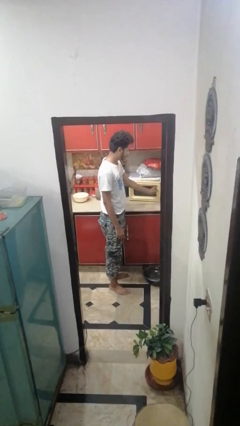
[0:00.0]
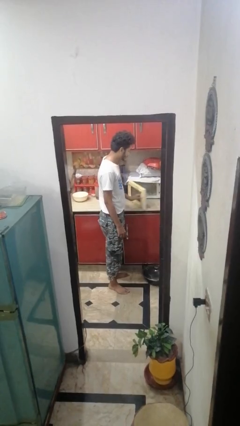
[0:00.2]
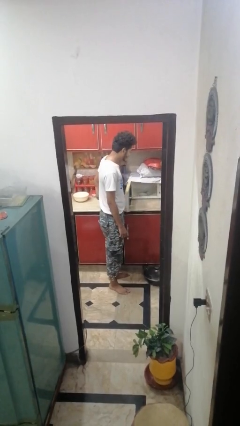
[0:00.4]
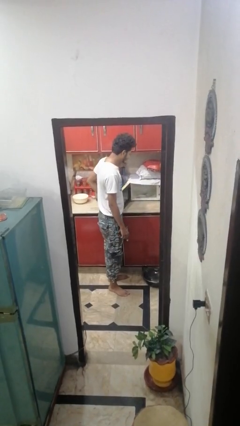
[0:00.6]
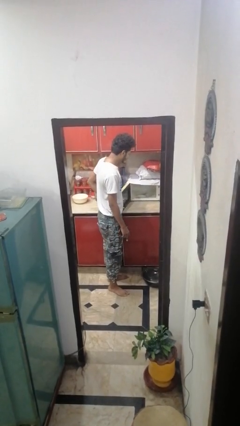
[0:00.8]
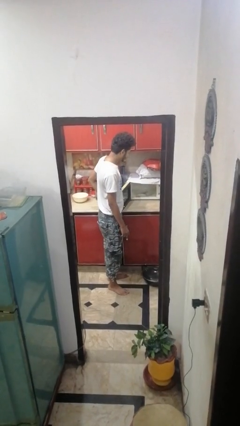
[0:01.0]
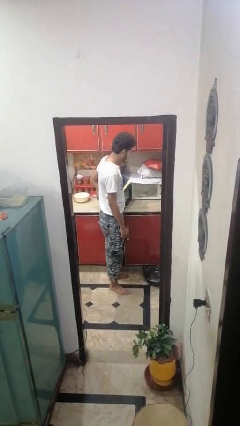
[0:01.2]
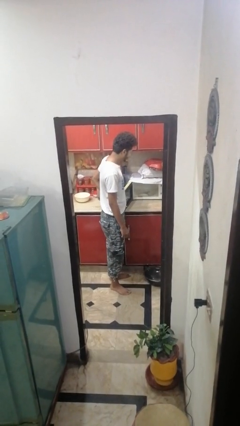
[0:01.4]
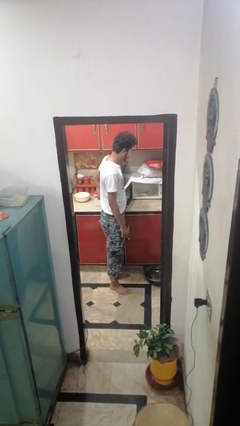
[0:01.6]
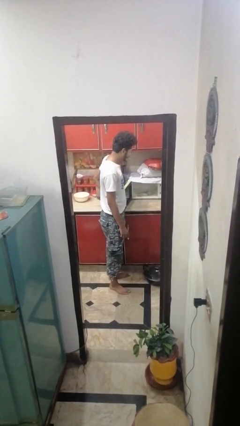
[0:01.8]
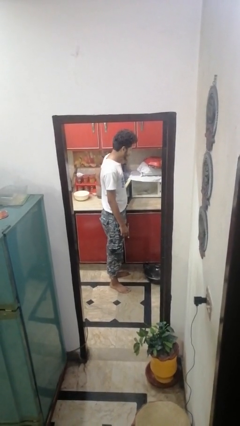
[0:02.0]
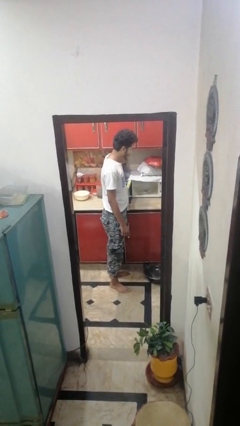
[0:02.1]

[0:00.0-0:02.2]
person opens microwave

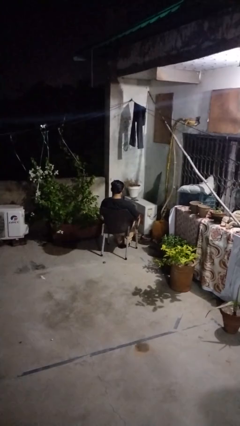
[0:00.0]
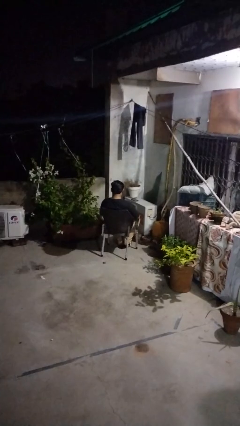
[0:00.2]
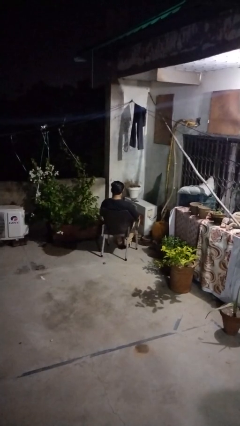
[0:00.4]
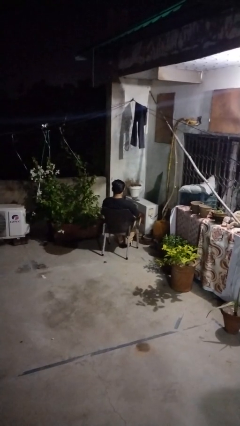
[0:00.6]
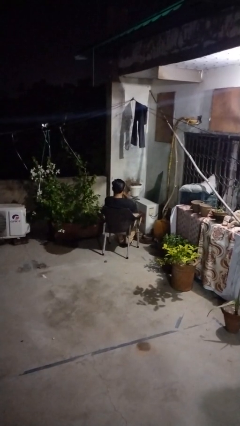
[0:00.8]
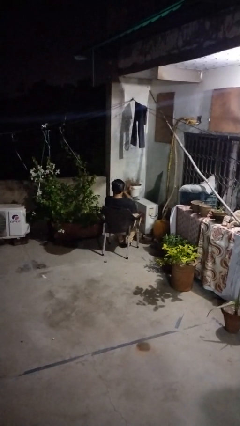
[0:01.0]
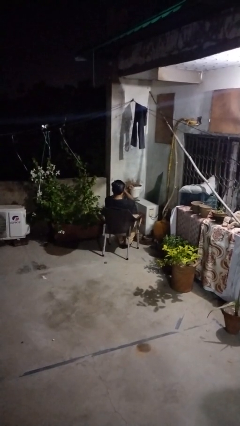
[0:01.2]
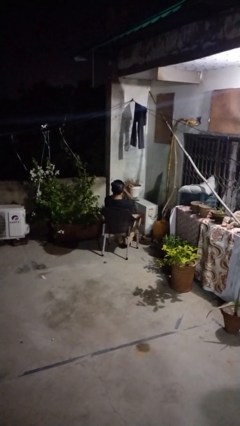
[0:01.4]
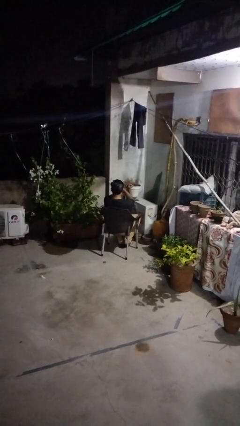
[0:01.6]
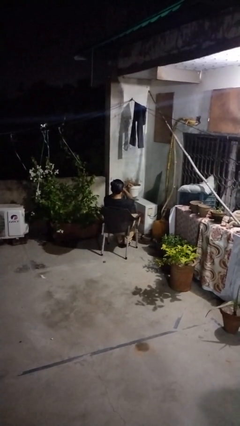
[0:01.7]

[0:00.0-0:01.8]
person gestures arms x

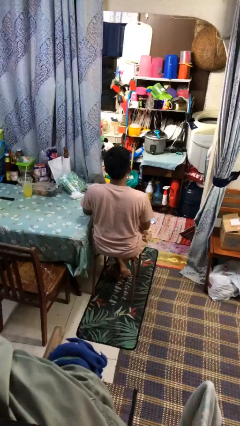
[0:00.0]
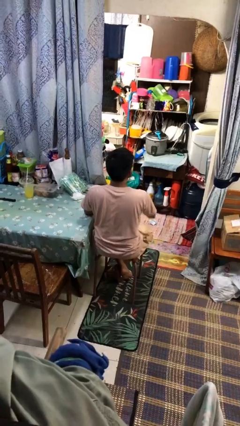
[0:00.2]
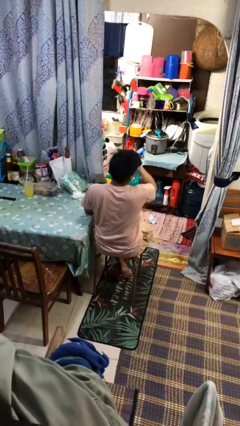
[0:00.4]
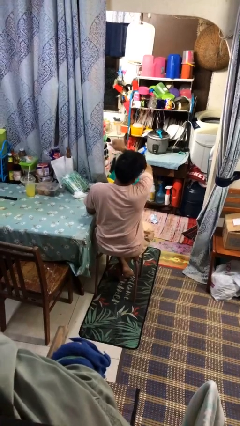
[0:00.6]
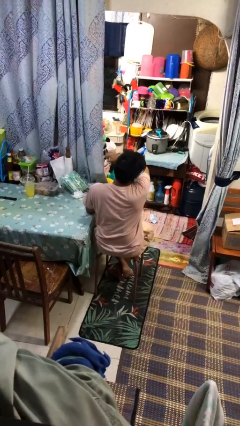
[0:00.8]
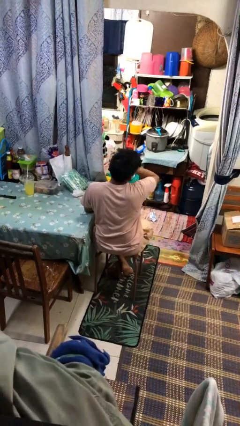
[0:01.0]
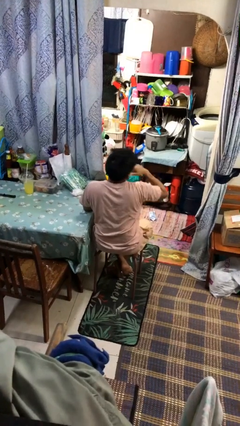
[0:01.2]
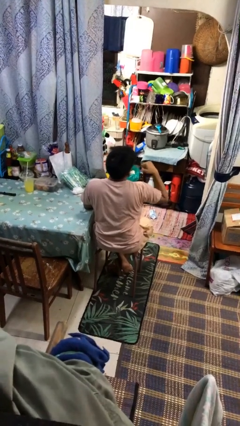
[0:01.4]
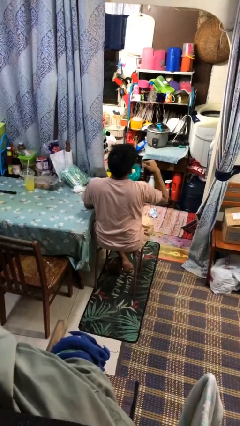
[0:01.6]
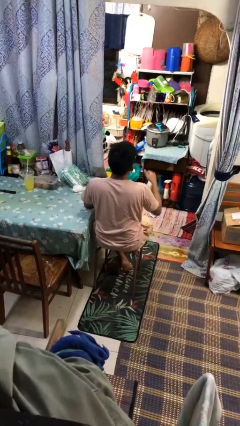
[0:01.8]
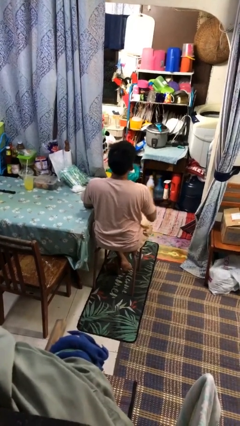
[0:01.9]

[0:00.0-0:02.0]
person gestures cut

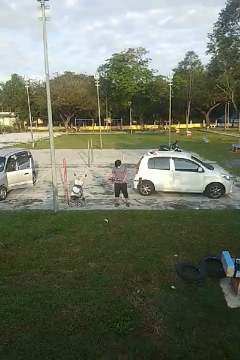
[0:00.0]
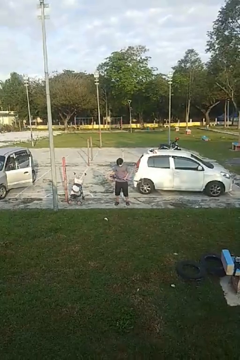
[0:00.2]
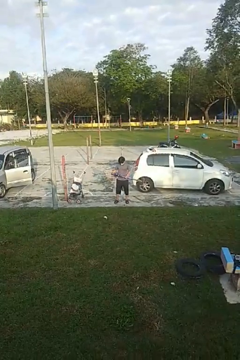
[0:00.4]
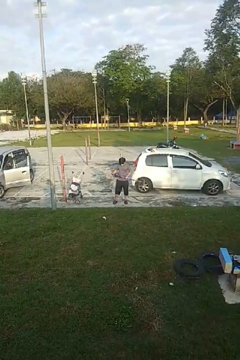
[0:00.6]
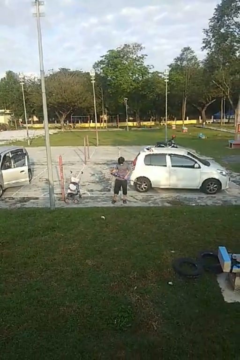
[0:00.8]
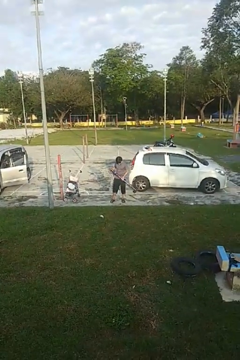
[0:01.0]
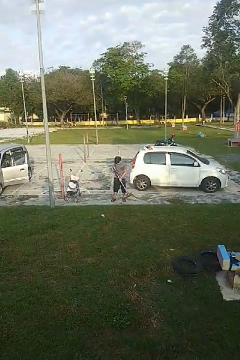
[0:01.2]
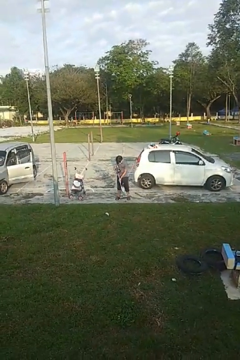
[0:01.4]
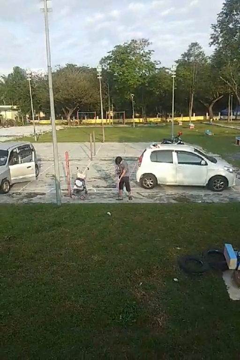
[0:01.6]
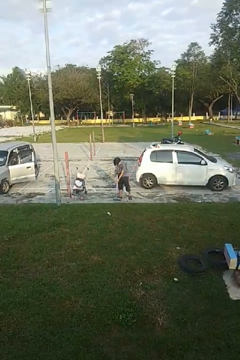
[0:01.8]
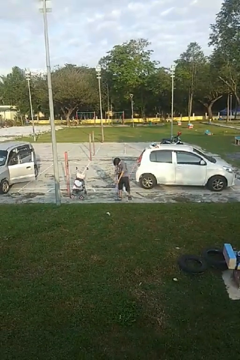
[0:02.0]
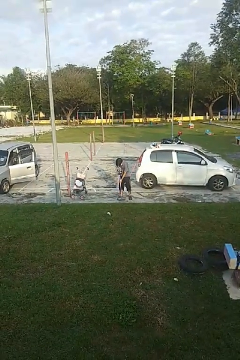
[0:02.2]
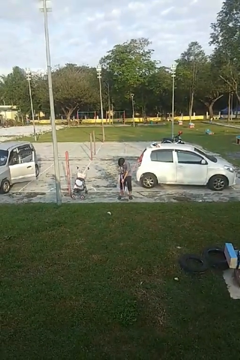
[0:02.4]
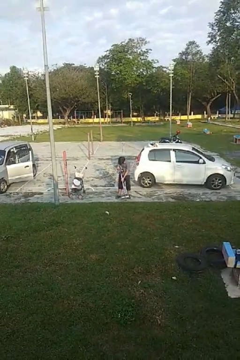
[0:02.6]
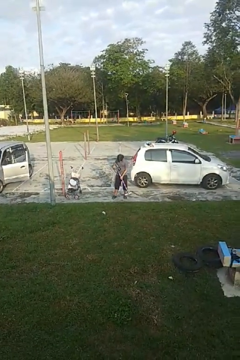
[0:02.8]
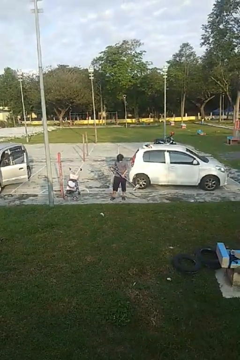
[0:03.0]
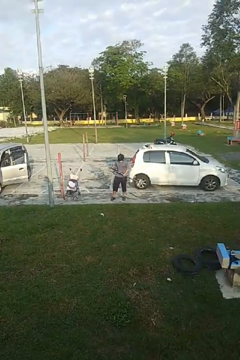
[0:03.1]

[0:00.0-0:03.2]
person vacuums carpet

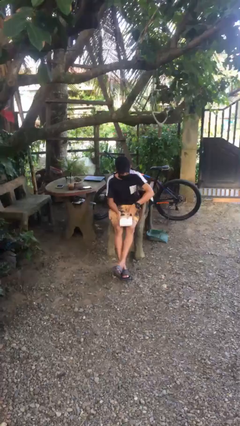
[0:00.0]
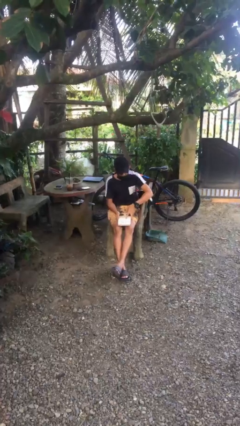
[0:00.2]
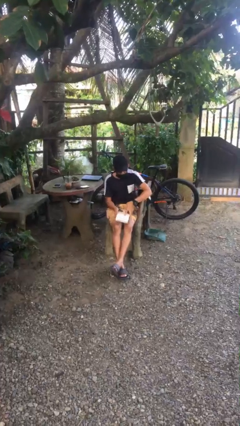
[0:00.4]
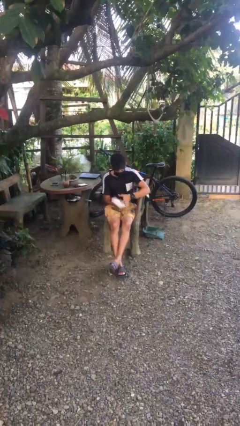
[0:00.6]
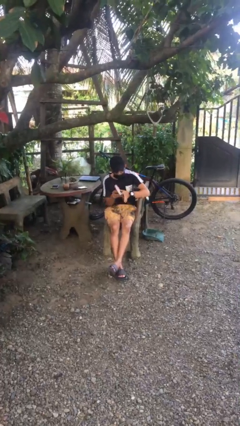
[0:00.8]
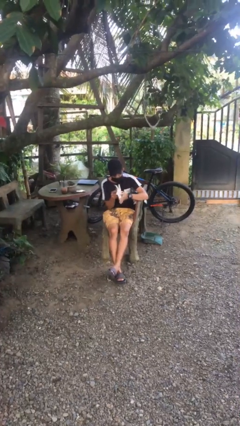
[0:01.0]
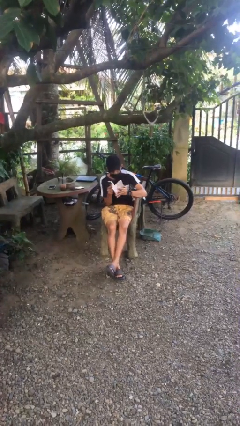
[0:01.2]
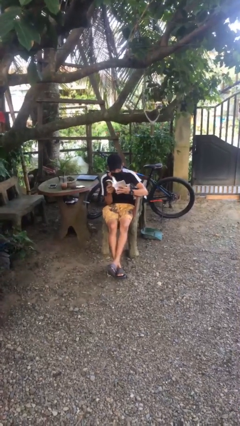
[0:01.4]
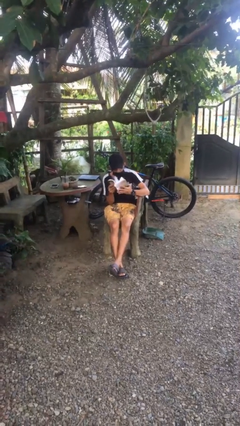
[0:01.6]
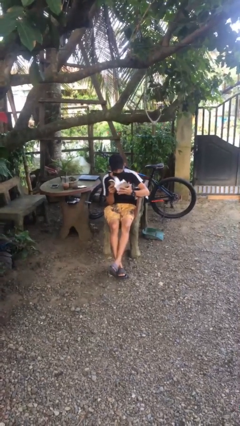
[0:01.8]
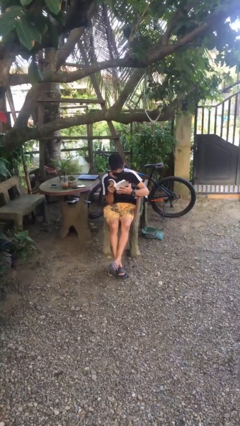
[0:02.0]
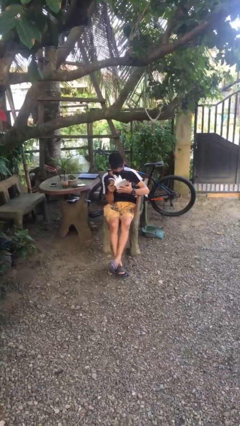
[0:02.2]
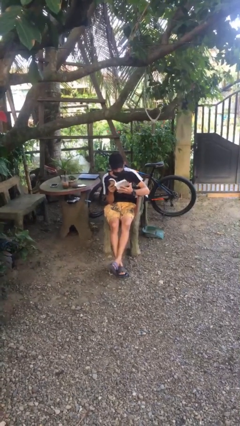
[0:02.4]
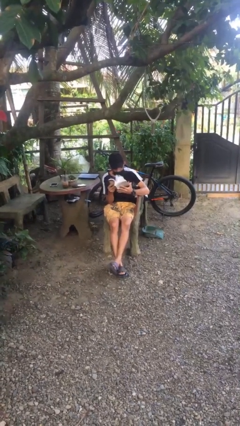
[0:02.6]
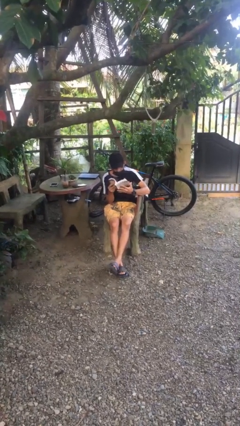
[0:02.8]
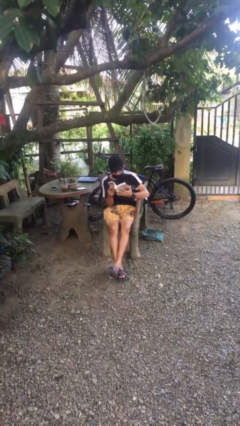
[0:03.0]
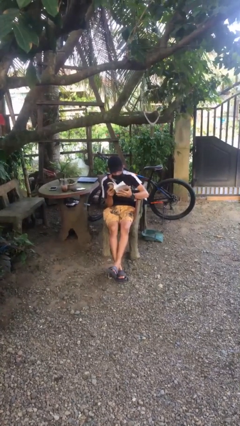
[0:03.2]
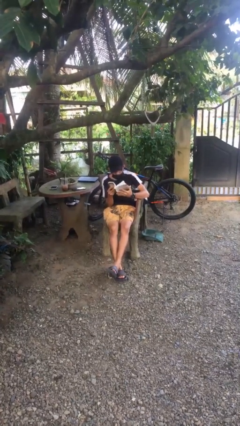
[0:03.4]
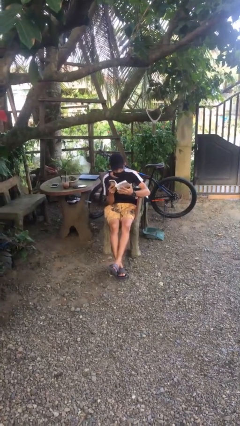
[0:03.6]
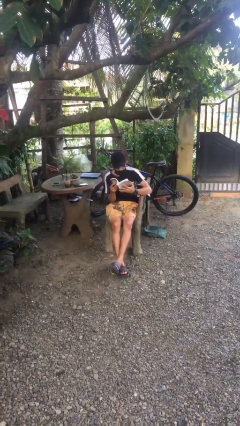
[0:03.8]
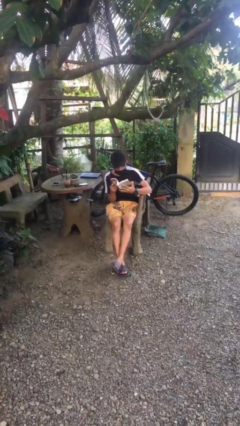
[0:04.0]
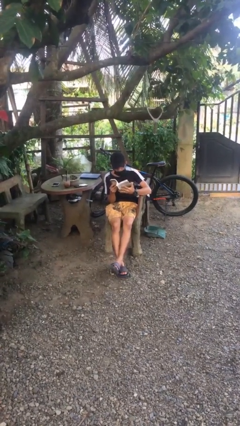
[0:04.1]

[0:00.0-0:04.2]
person reads document

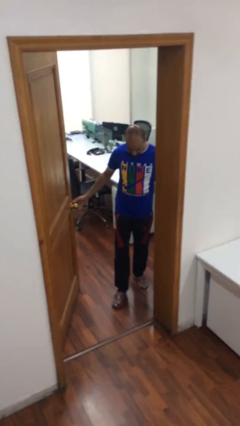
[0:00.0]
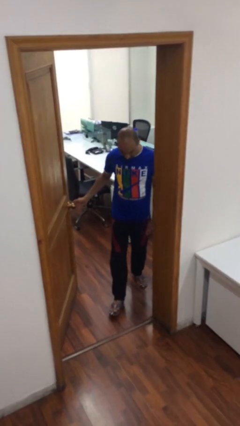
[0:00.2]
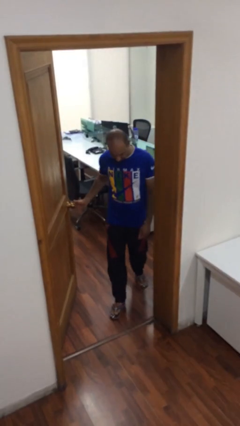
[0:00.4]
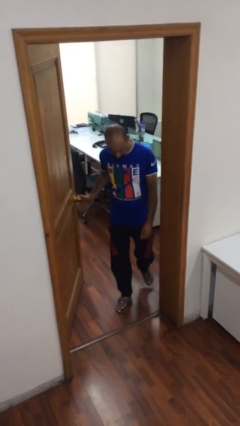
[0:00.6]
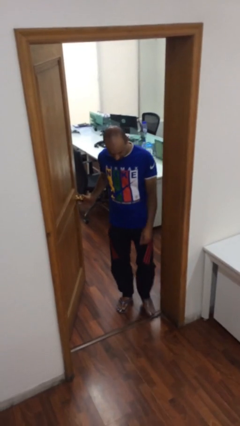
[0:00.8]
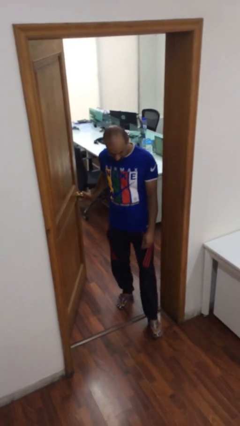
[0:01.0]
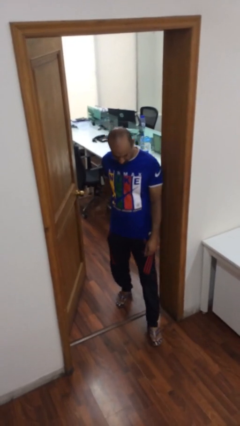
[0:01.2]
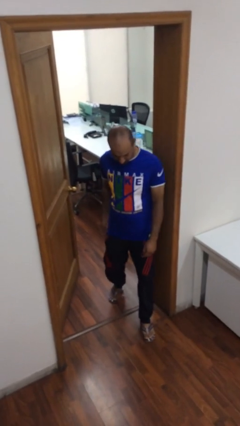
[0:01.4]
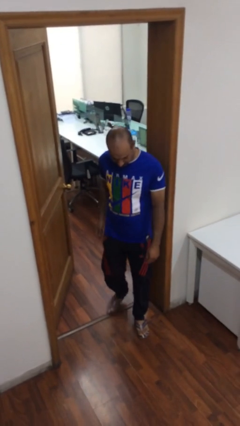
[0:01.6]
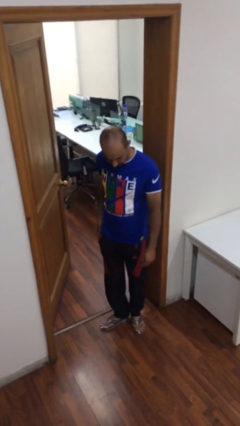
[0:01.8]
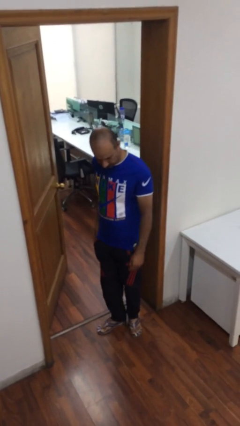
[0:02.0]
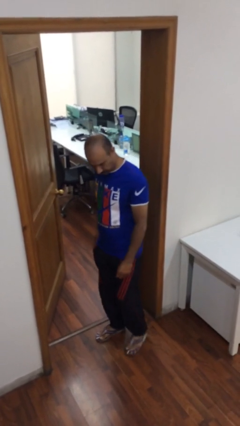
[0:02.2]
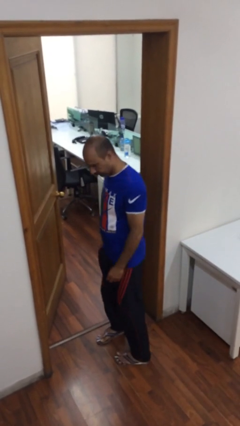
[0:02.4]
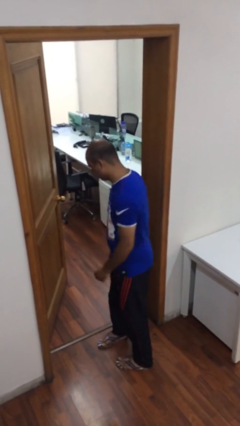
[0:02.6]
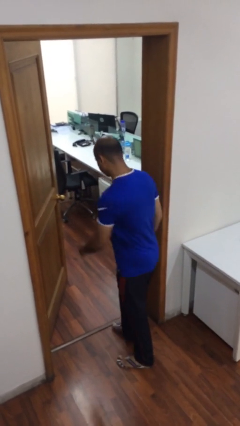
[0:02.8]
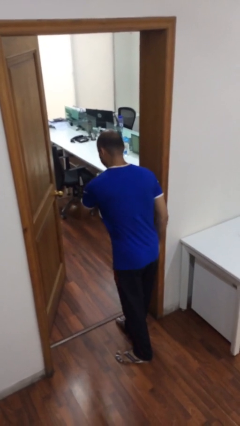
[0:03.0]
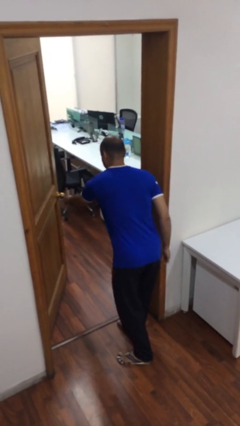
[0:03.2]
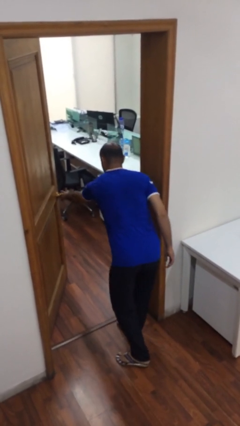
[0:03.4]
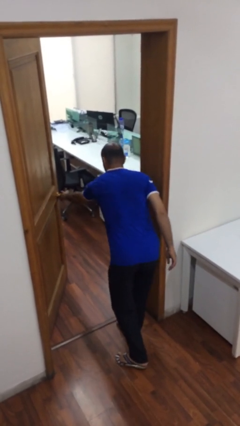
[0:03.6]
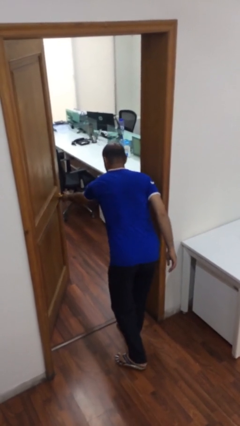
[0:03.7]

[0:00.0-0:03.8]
person enters scene through structure

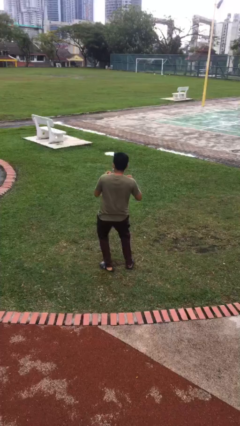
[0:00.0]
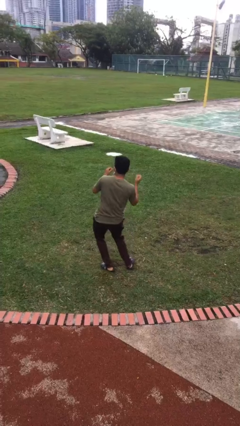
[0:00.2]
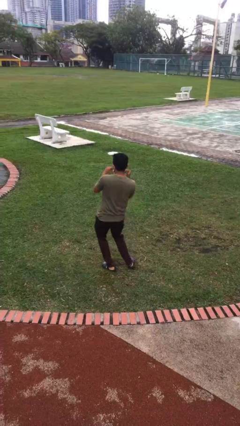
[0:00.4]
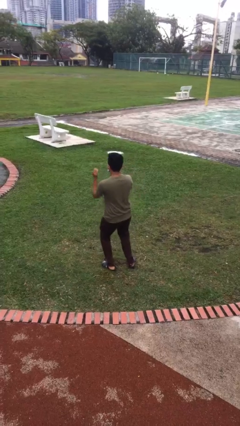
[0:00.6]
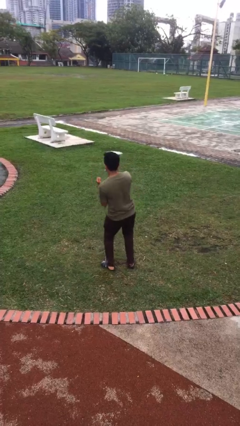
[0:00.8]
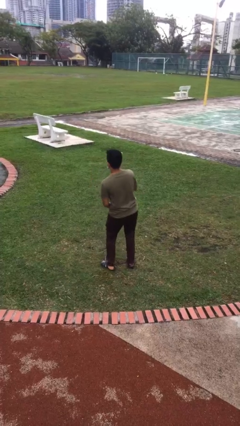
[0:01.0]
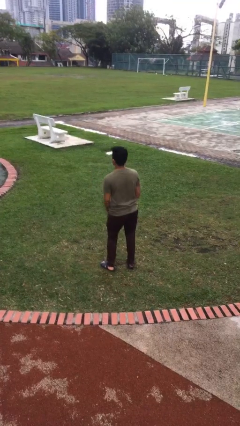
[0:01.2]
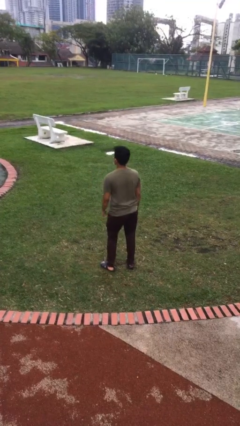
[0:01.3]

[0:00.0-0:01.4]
person dances in place
